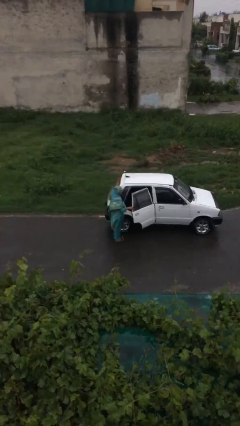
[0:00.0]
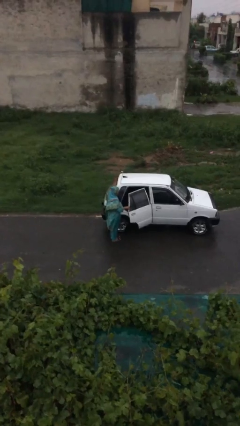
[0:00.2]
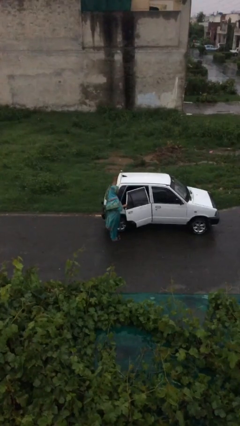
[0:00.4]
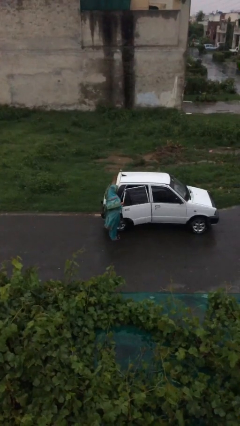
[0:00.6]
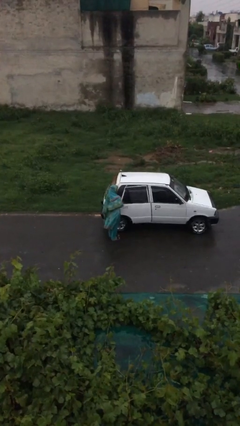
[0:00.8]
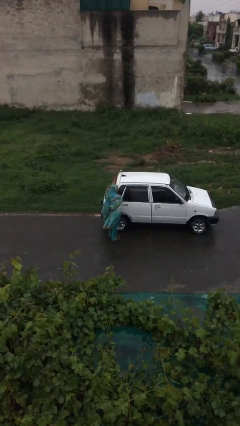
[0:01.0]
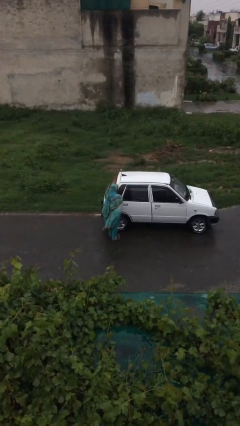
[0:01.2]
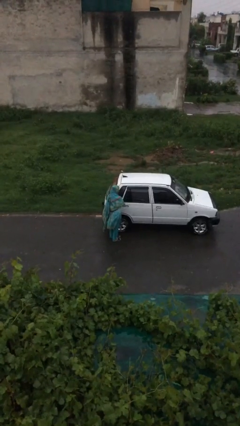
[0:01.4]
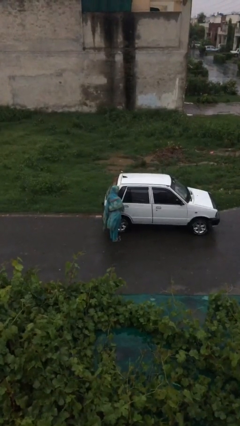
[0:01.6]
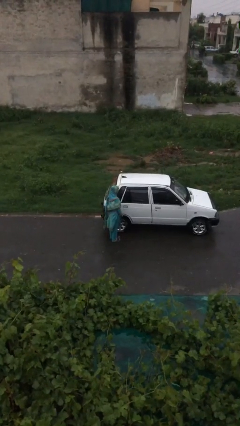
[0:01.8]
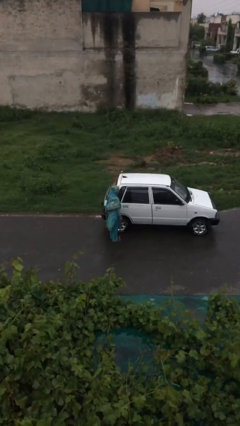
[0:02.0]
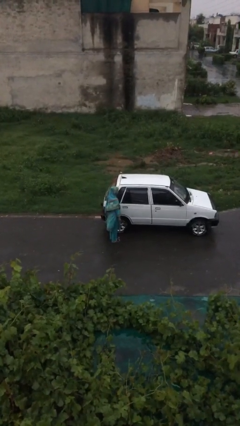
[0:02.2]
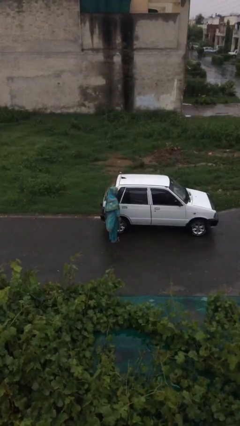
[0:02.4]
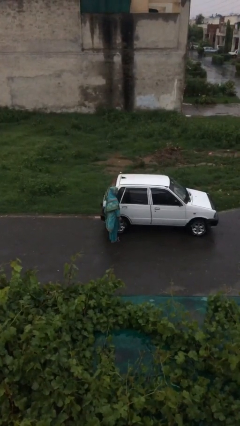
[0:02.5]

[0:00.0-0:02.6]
person closes car door

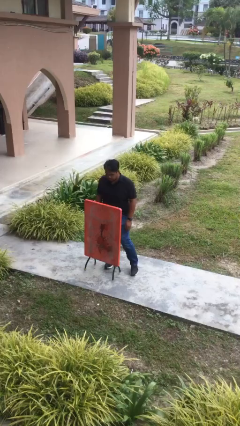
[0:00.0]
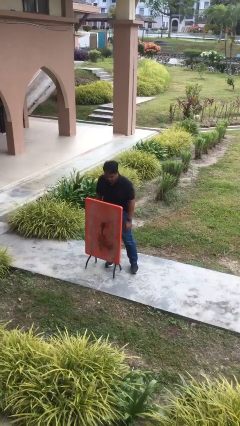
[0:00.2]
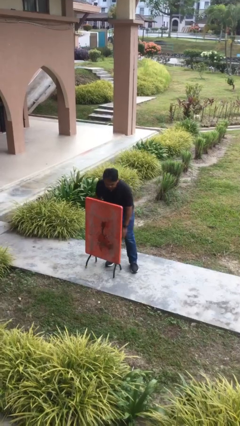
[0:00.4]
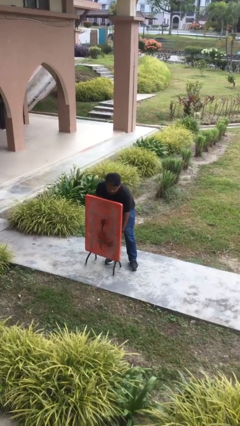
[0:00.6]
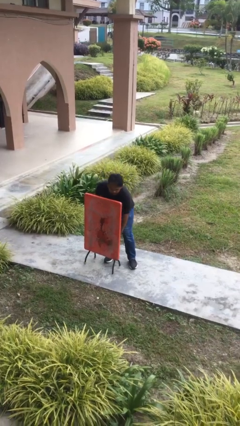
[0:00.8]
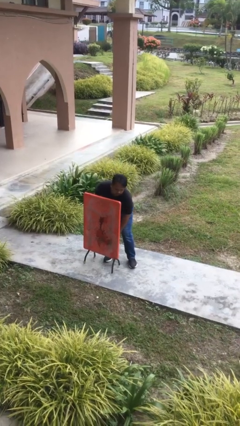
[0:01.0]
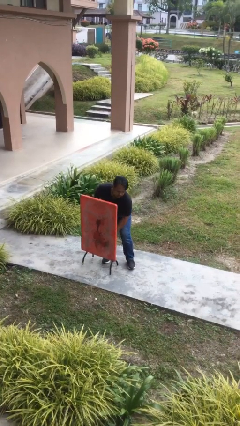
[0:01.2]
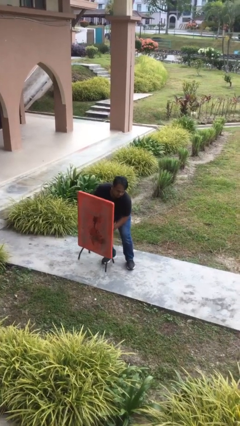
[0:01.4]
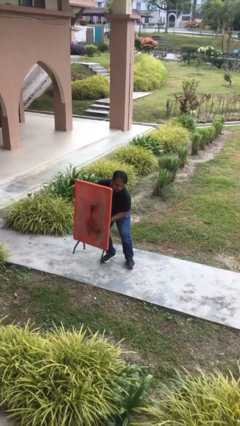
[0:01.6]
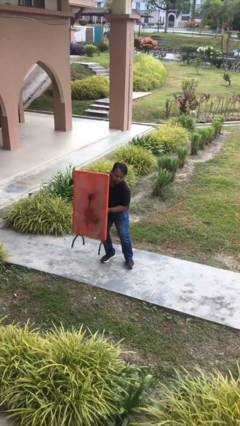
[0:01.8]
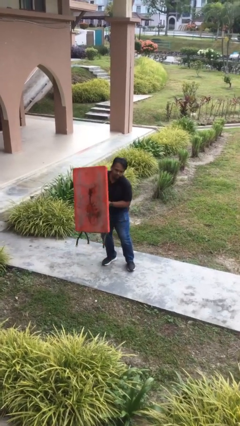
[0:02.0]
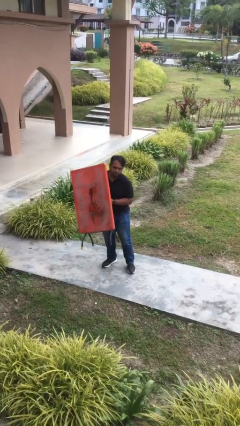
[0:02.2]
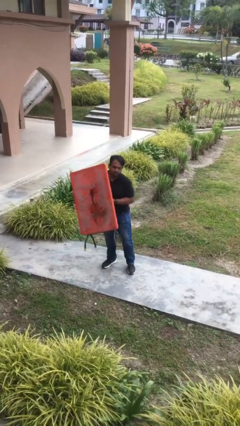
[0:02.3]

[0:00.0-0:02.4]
person picks up object from floor

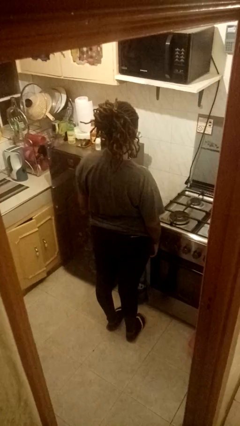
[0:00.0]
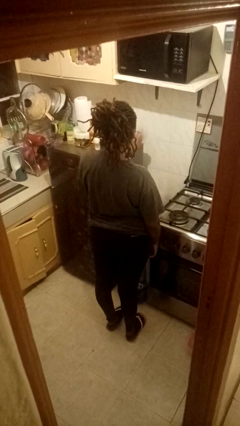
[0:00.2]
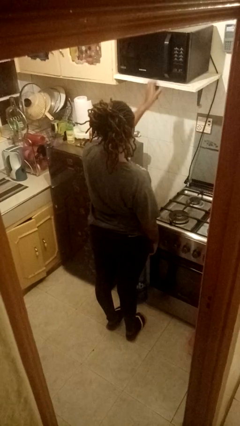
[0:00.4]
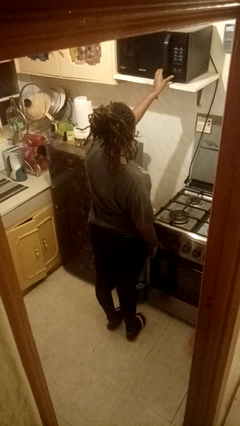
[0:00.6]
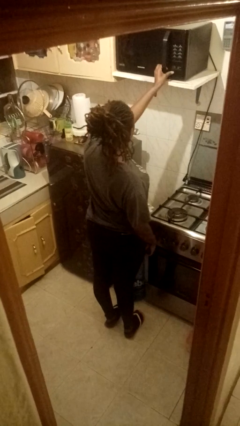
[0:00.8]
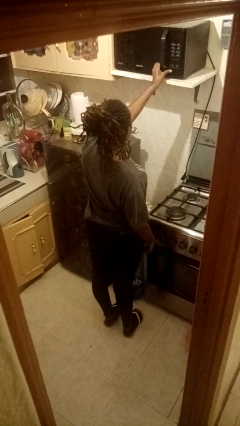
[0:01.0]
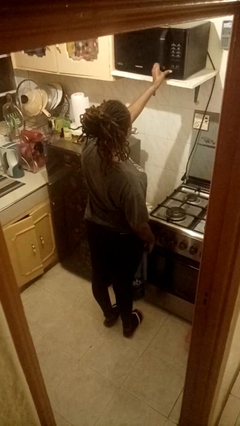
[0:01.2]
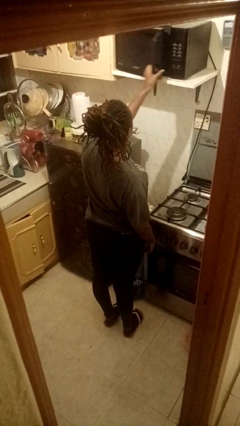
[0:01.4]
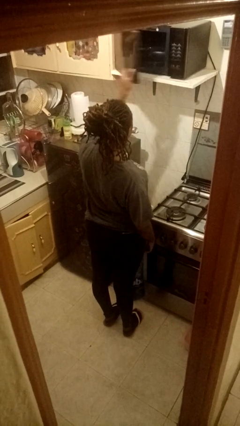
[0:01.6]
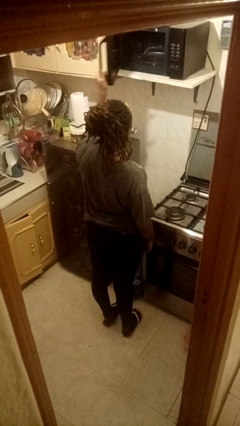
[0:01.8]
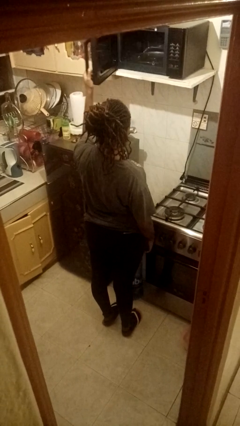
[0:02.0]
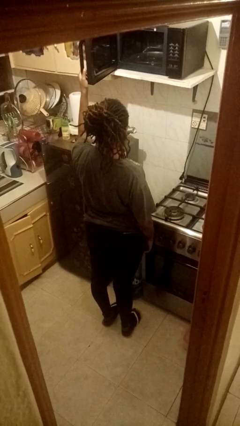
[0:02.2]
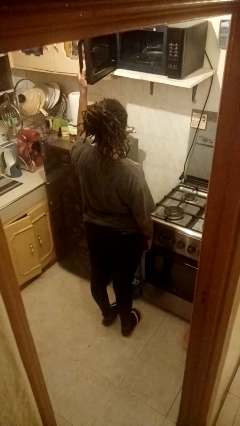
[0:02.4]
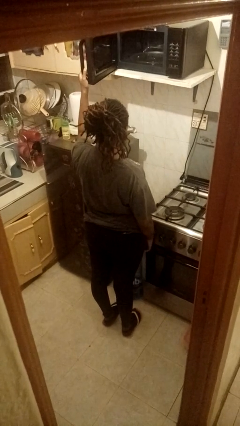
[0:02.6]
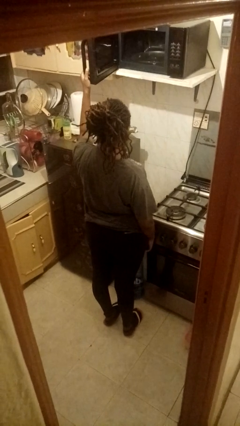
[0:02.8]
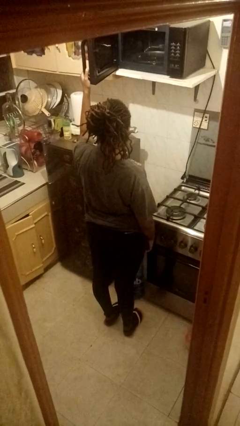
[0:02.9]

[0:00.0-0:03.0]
person opens microwave

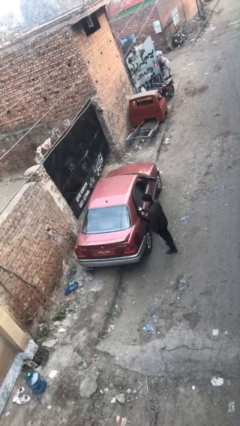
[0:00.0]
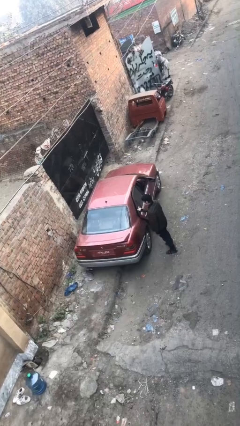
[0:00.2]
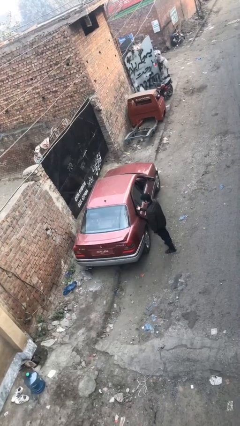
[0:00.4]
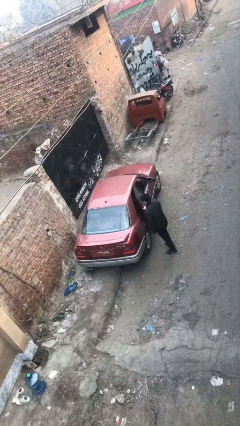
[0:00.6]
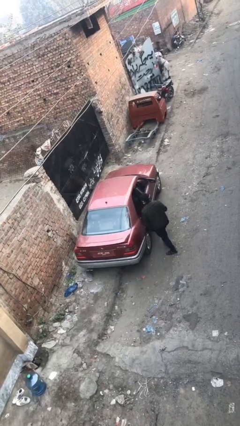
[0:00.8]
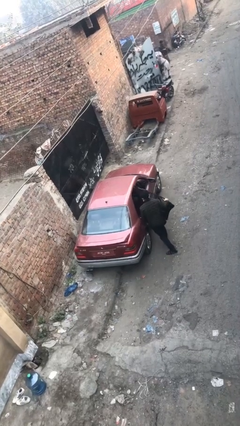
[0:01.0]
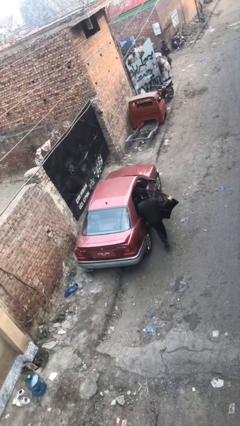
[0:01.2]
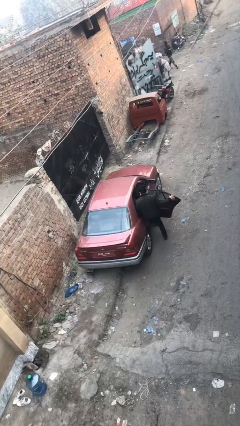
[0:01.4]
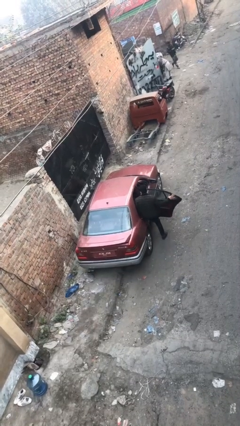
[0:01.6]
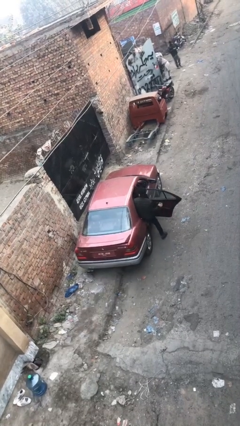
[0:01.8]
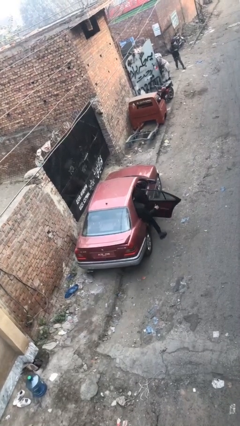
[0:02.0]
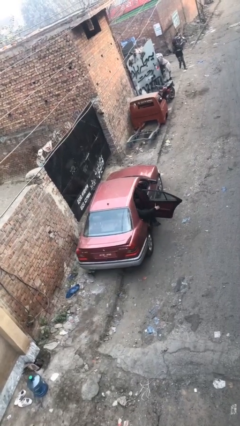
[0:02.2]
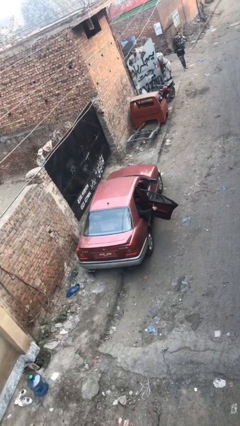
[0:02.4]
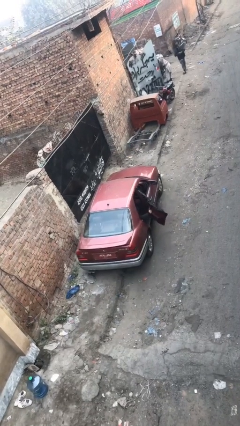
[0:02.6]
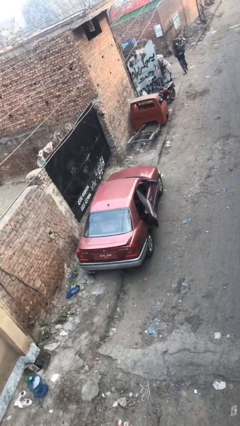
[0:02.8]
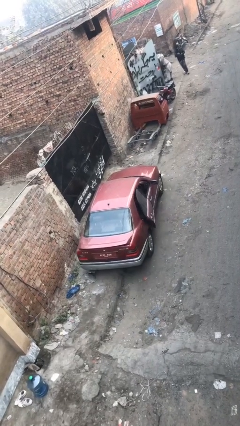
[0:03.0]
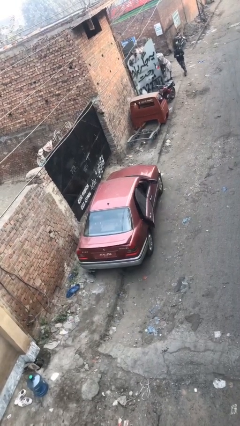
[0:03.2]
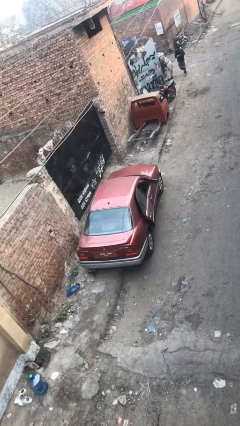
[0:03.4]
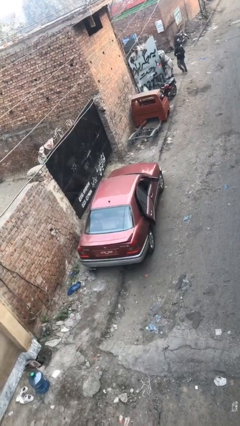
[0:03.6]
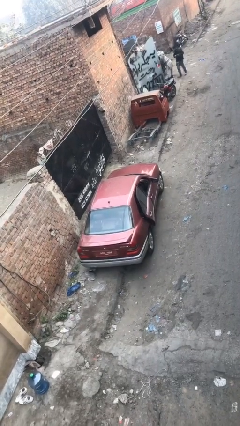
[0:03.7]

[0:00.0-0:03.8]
car picks up person

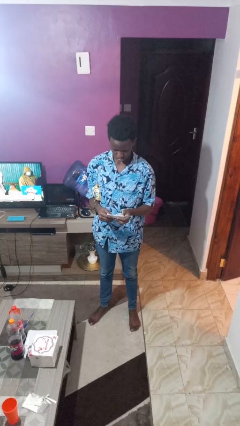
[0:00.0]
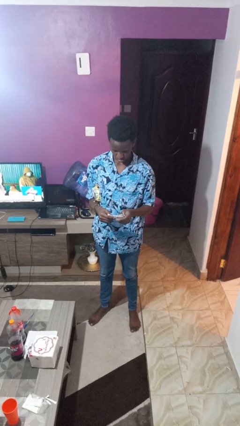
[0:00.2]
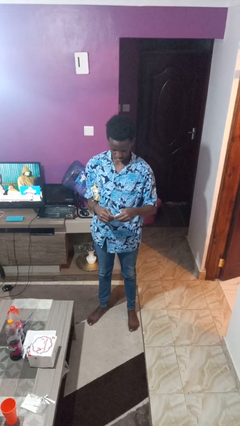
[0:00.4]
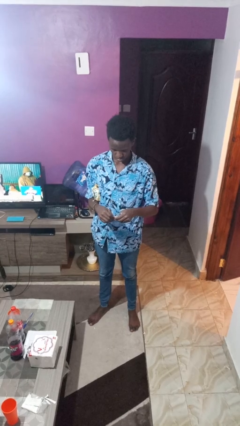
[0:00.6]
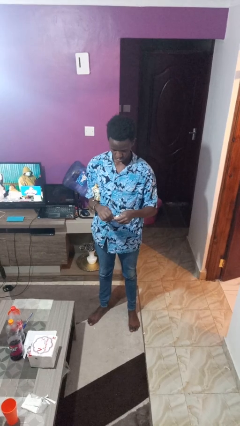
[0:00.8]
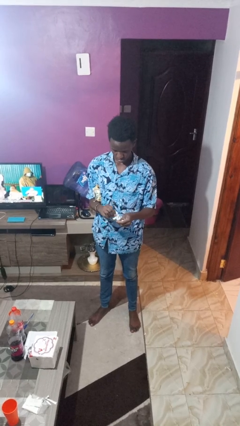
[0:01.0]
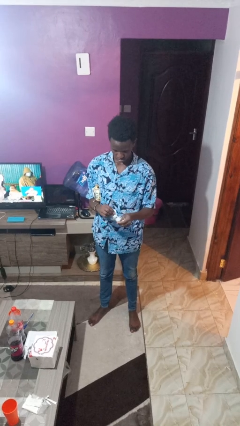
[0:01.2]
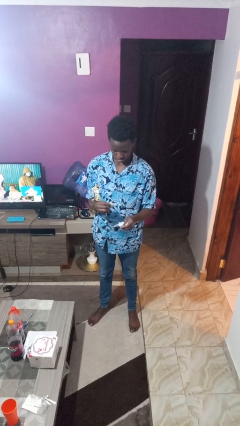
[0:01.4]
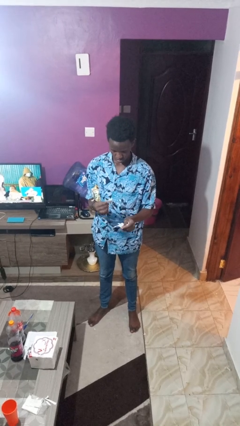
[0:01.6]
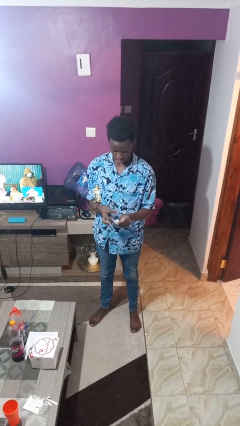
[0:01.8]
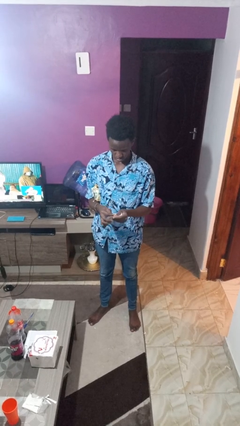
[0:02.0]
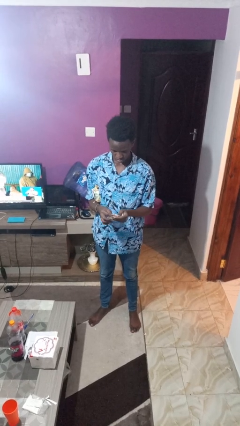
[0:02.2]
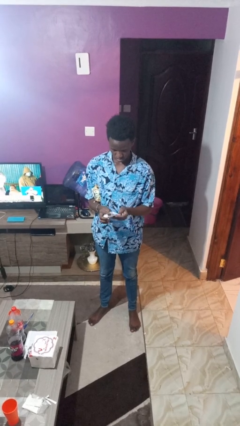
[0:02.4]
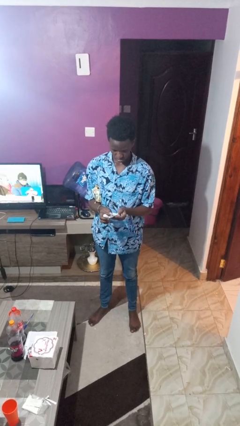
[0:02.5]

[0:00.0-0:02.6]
person tears paper

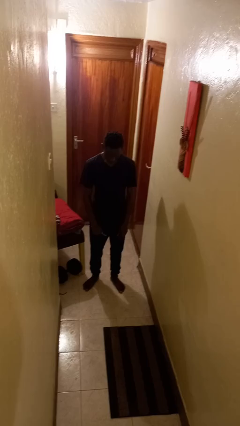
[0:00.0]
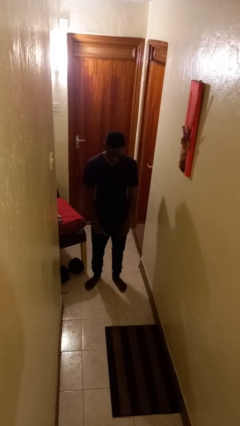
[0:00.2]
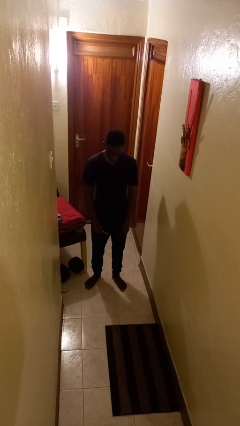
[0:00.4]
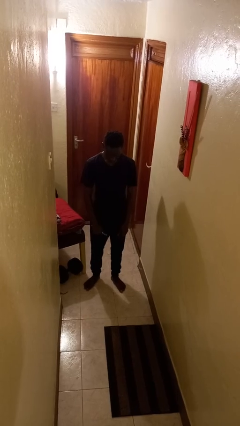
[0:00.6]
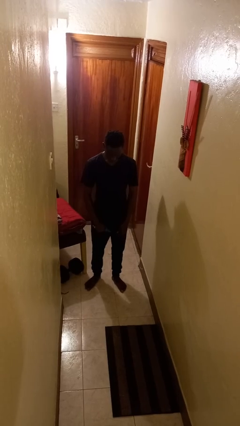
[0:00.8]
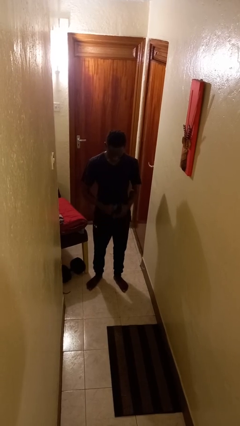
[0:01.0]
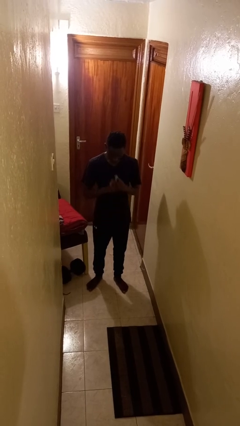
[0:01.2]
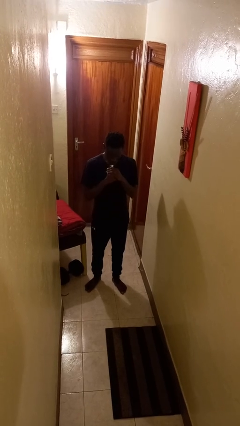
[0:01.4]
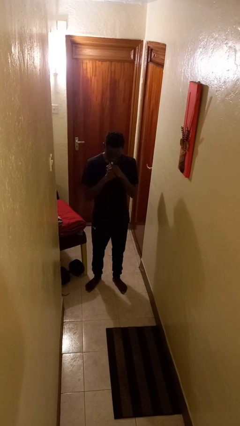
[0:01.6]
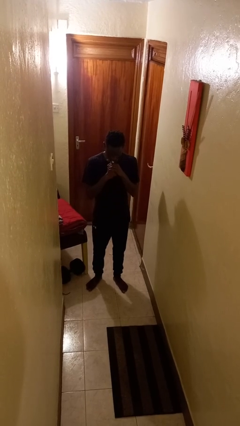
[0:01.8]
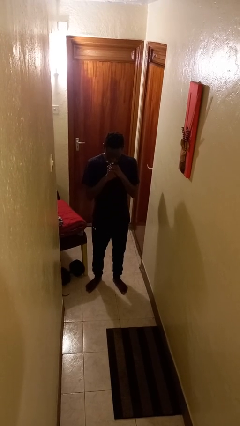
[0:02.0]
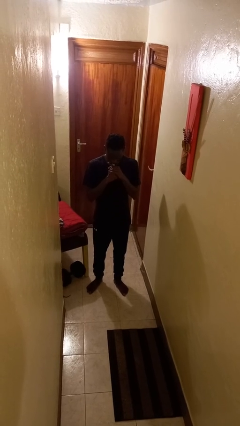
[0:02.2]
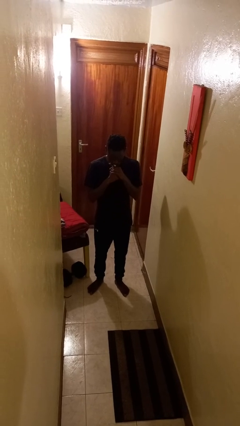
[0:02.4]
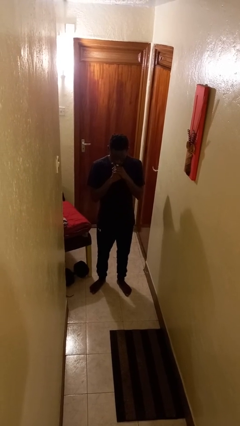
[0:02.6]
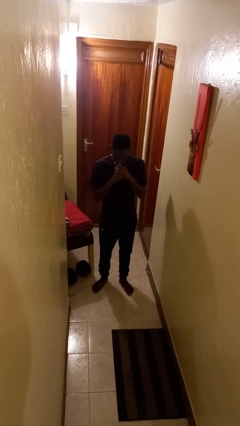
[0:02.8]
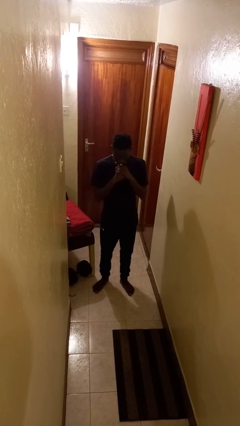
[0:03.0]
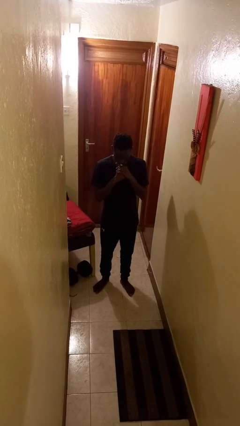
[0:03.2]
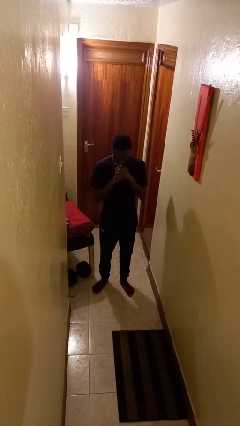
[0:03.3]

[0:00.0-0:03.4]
person vapes

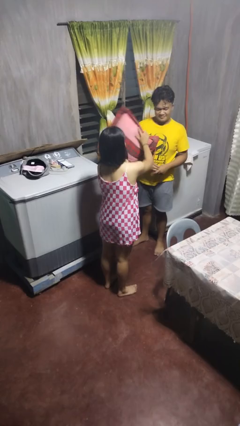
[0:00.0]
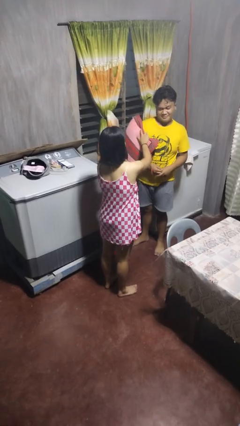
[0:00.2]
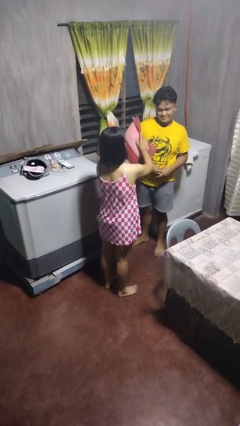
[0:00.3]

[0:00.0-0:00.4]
person hits person with pillow
